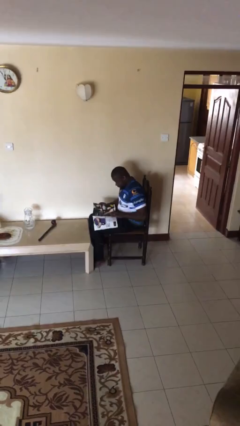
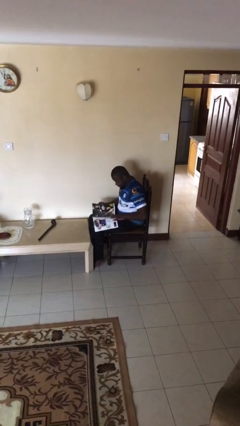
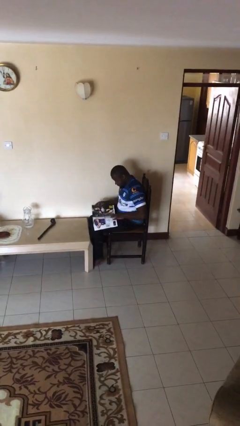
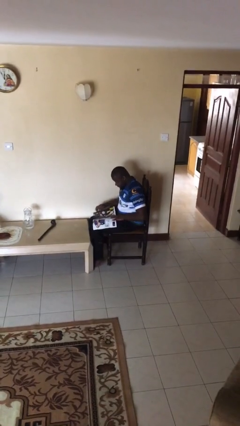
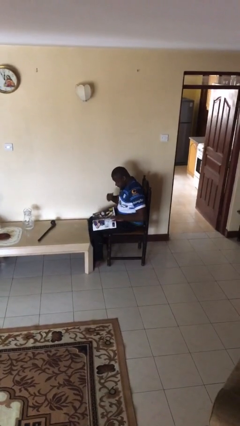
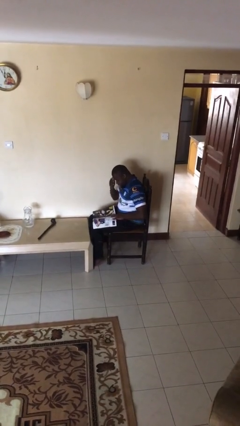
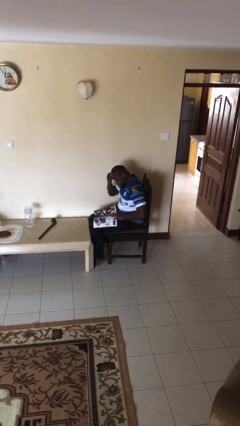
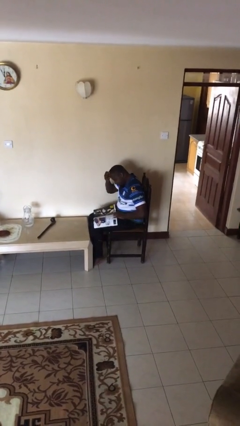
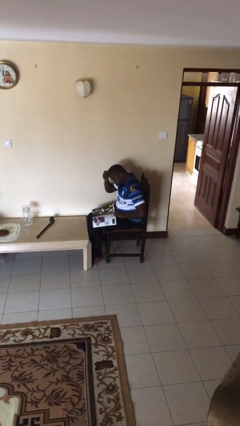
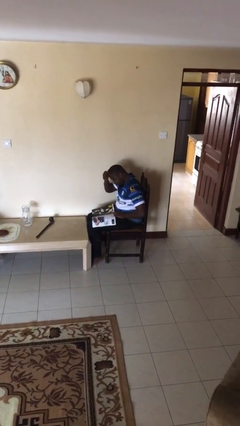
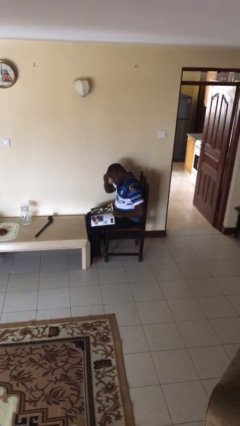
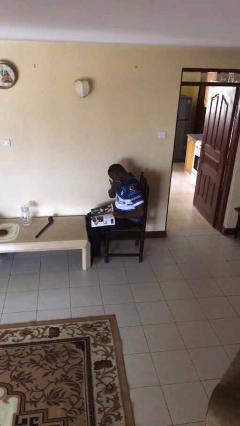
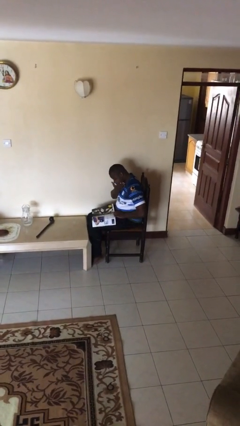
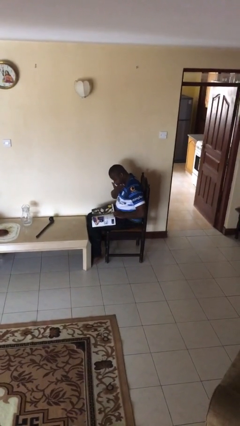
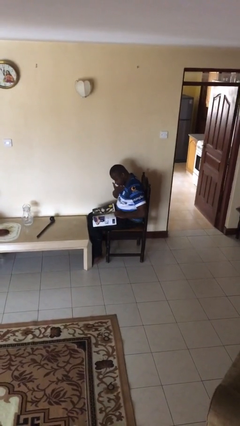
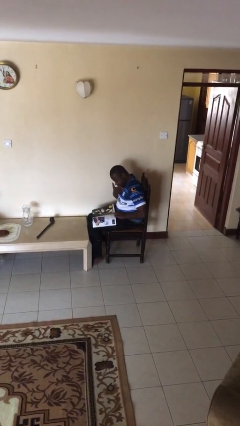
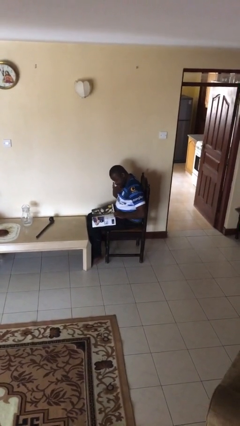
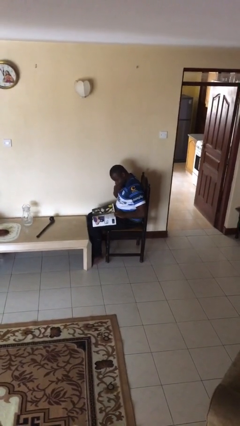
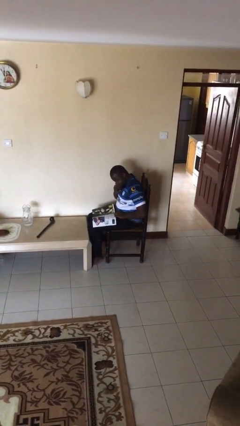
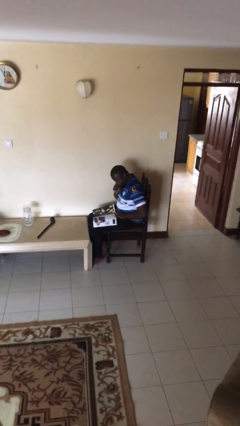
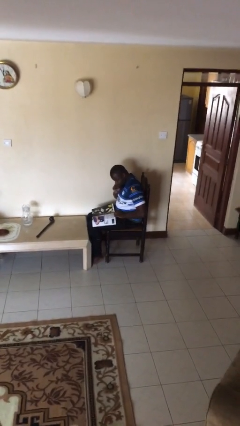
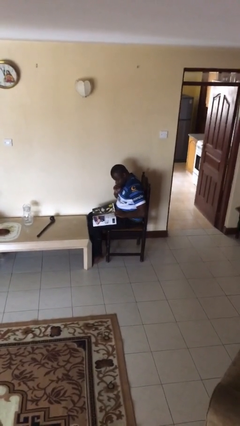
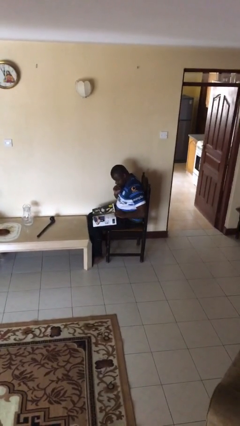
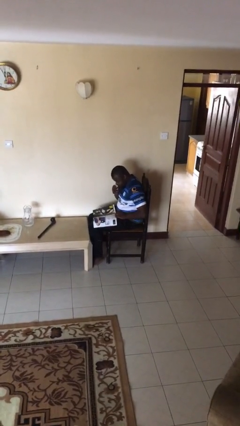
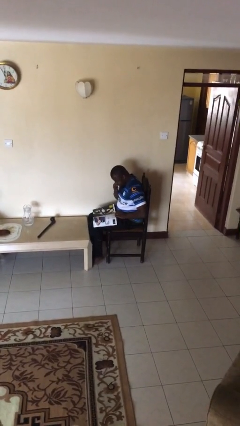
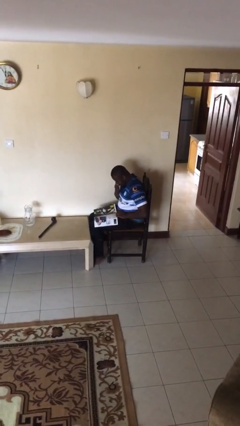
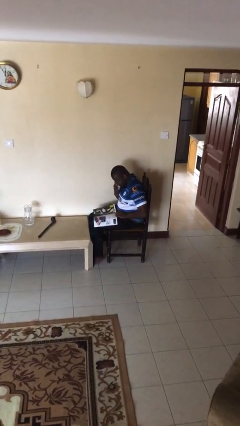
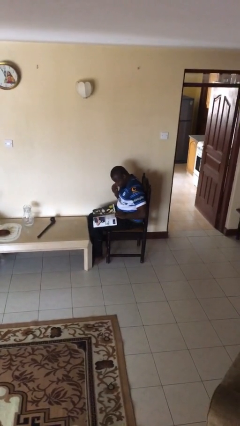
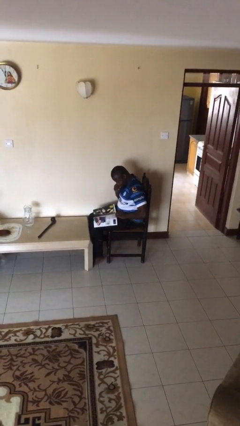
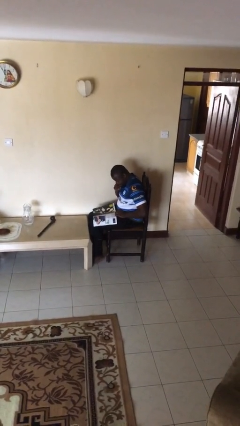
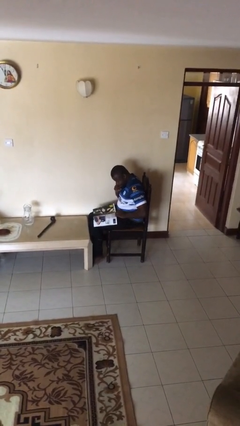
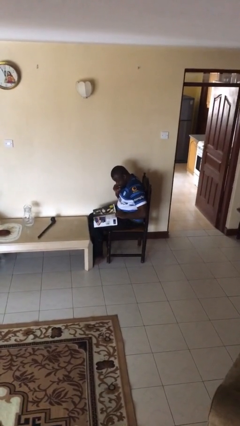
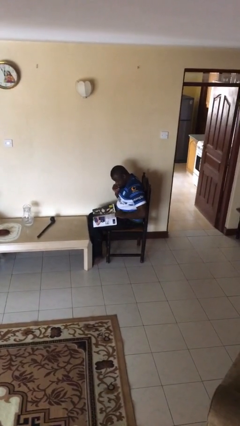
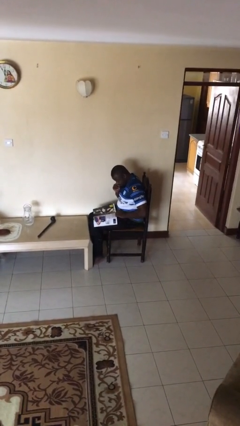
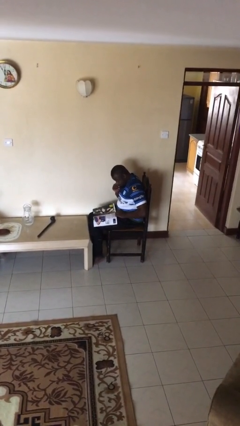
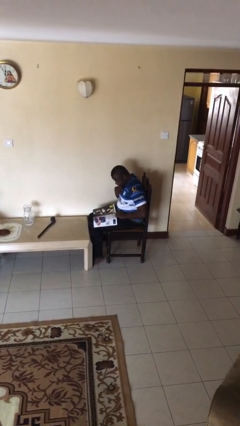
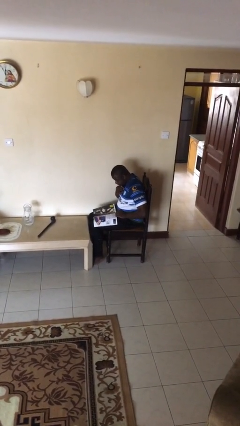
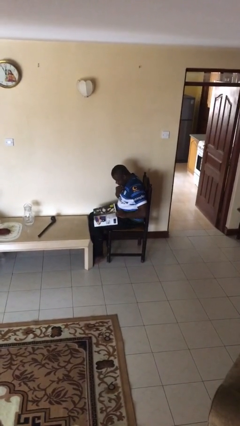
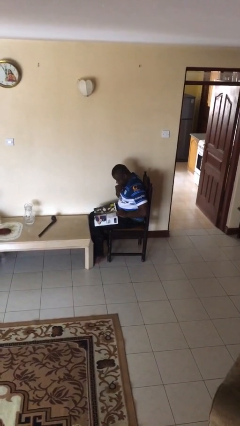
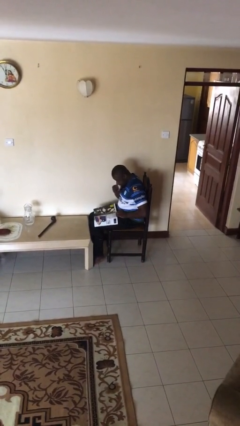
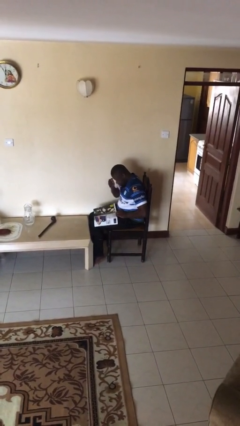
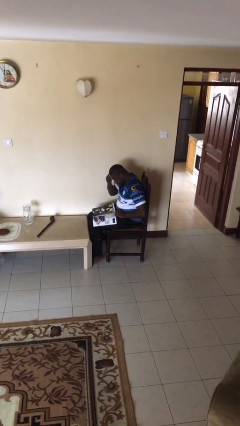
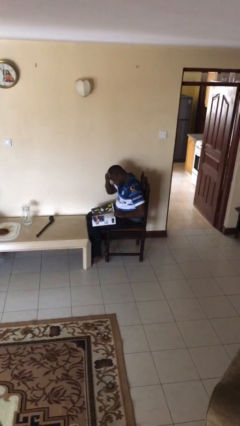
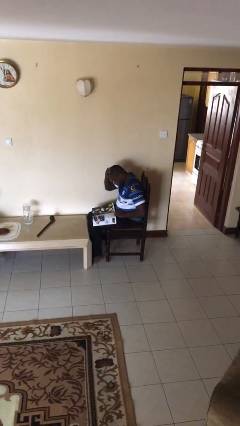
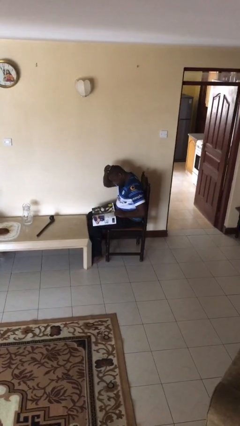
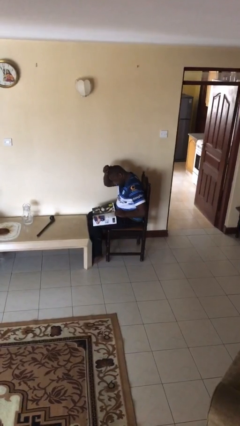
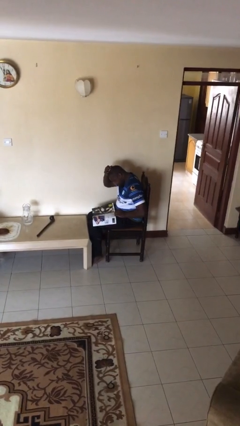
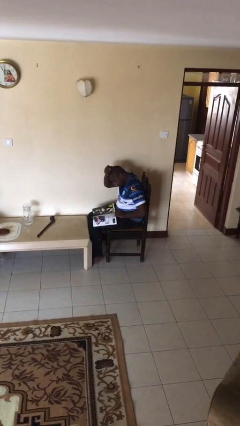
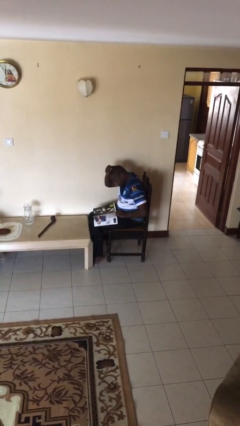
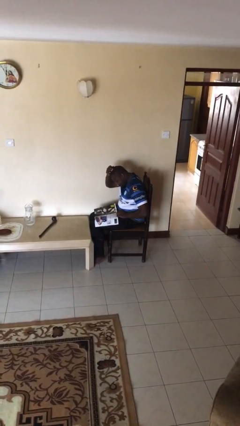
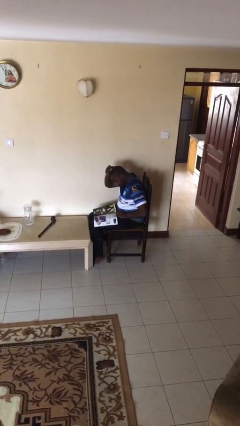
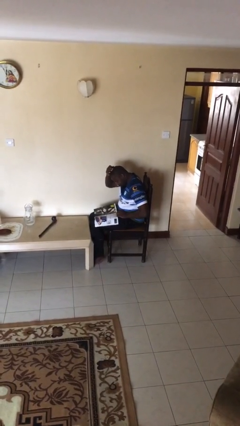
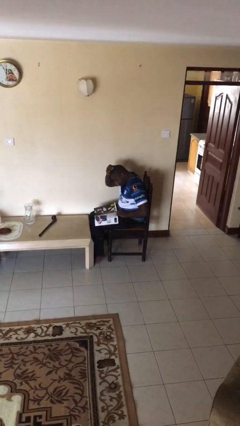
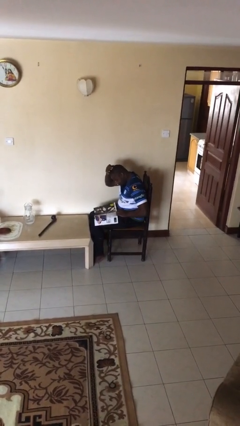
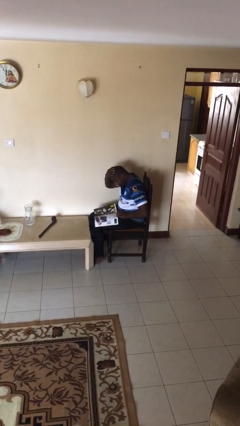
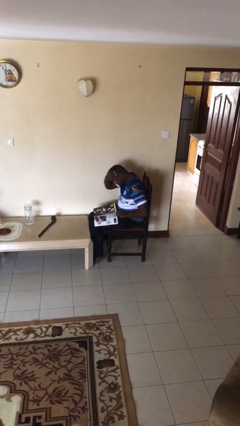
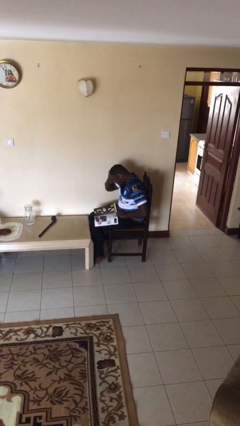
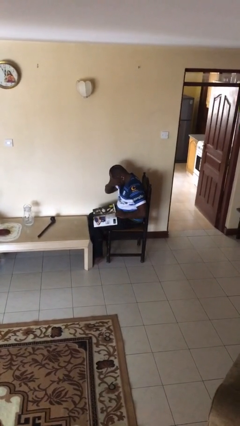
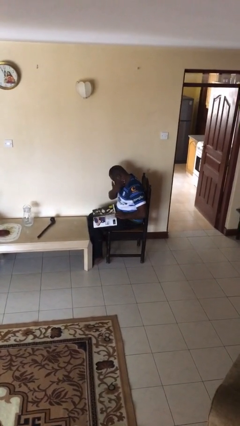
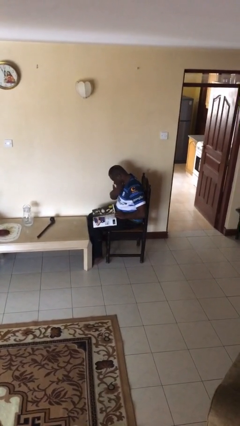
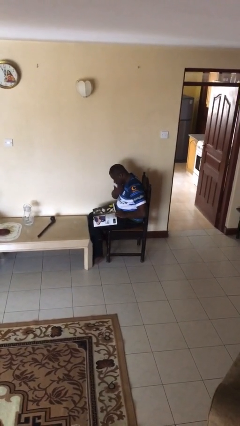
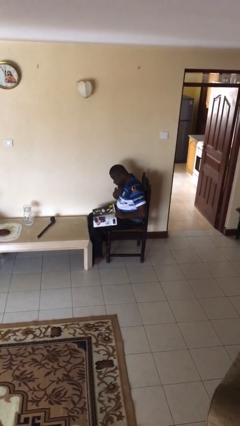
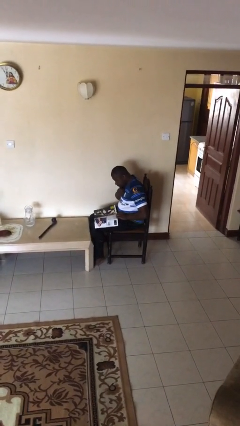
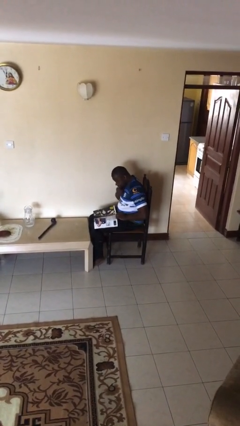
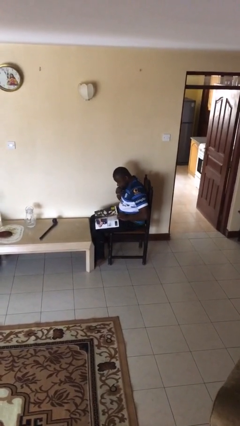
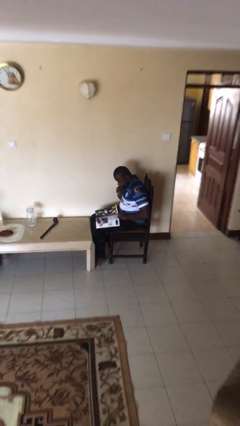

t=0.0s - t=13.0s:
person reads document

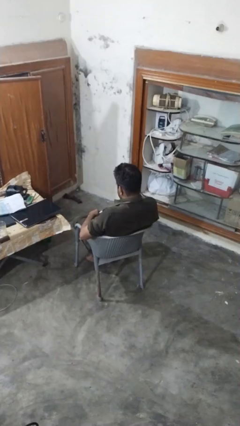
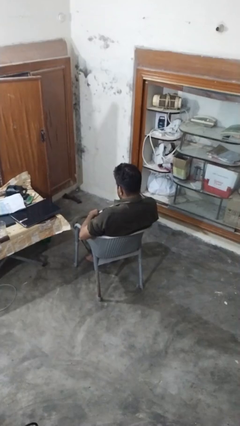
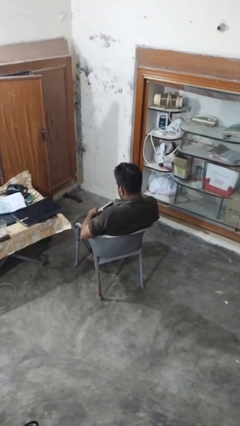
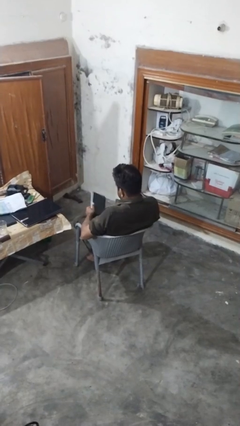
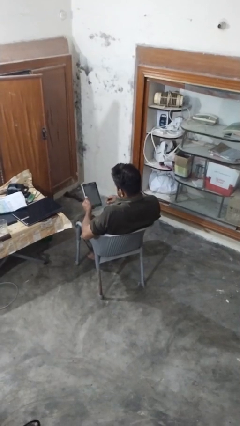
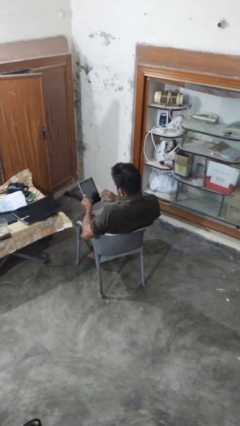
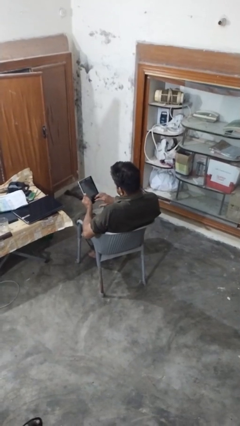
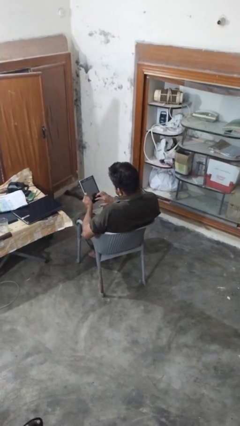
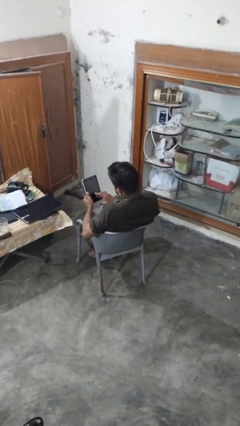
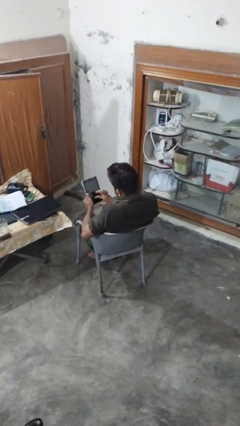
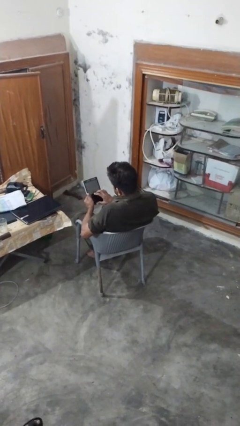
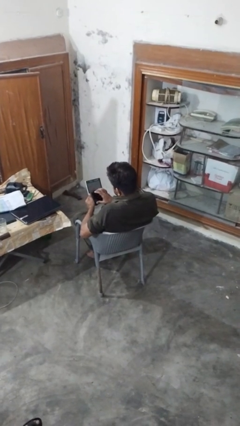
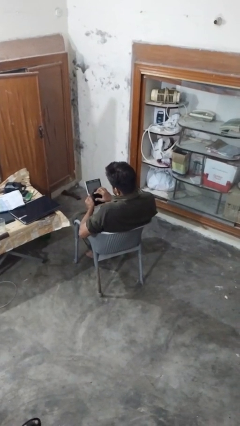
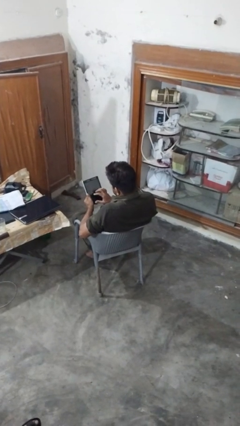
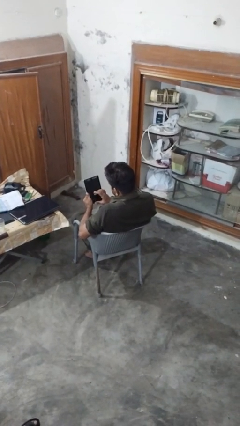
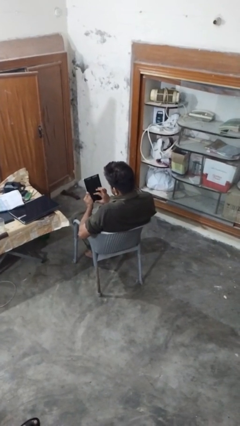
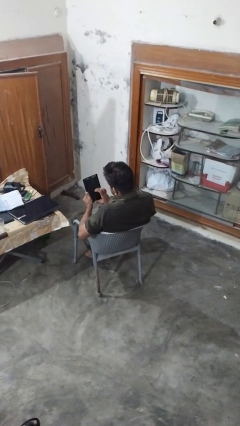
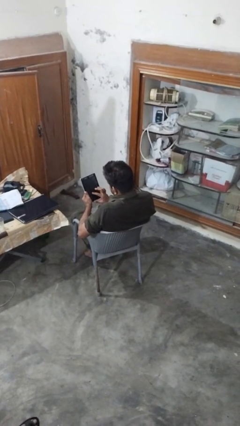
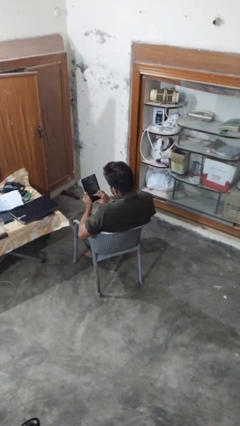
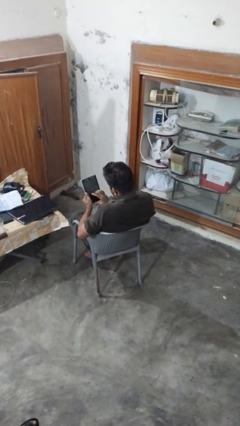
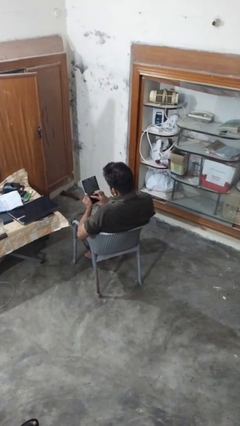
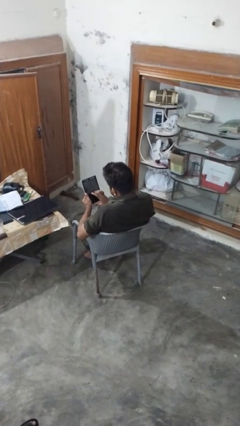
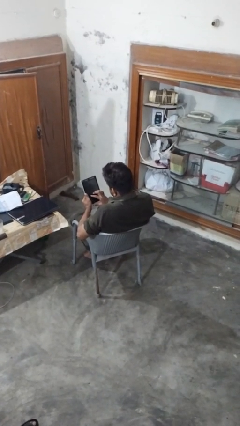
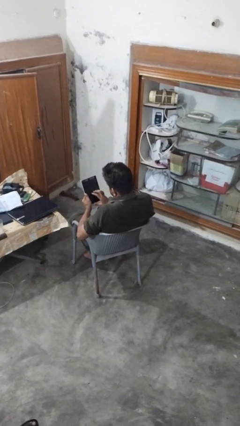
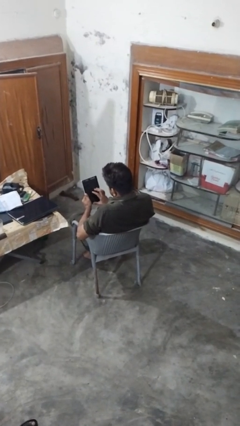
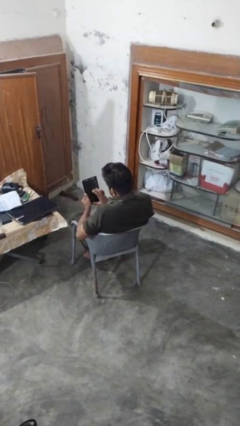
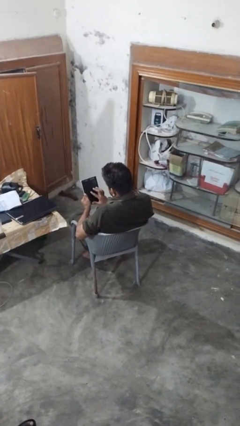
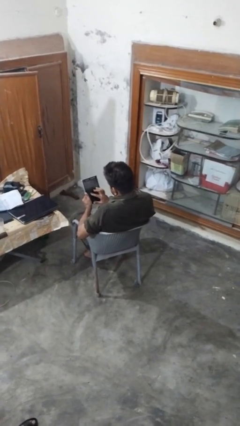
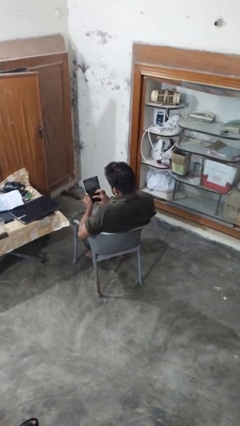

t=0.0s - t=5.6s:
person interacts with tablet
